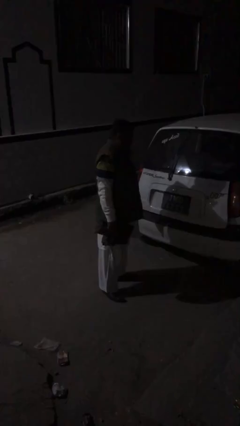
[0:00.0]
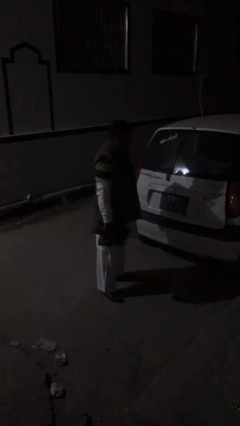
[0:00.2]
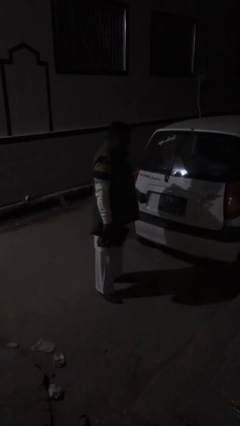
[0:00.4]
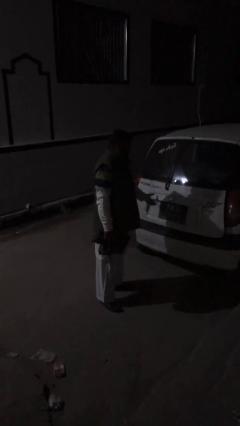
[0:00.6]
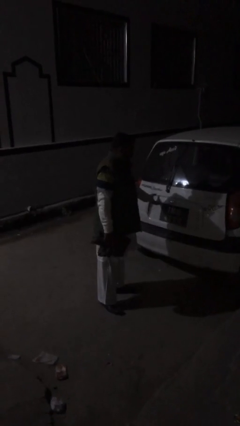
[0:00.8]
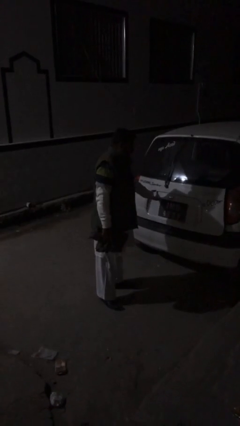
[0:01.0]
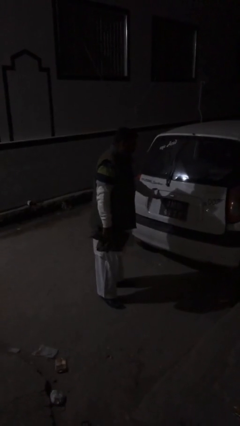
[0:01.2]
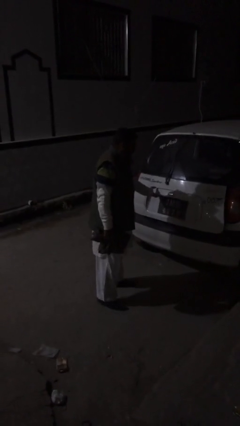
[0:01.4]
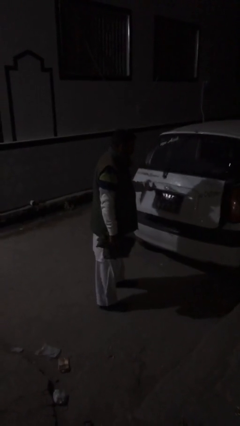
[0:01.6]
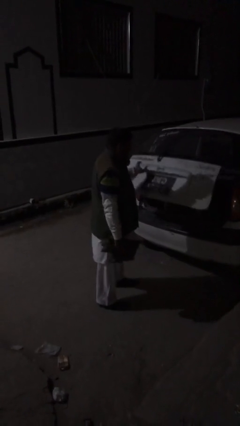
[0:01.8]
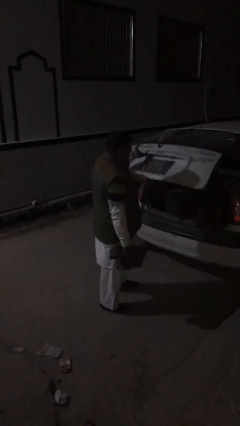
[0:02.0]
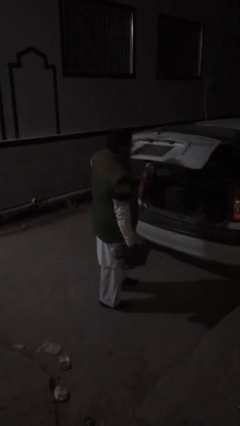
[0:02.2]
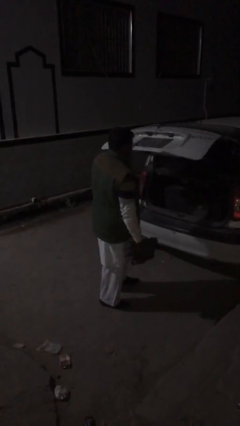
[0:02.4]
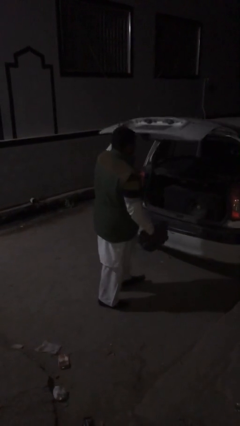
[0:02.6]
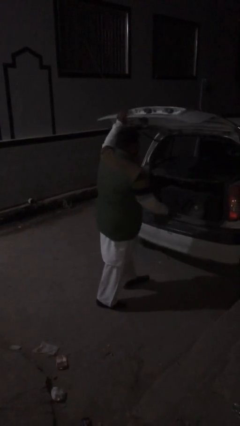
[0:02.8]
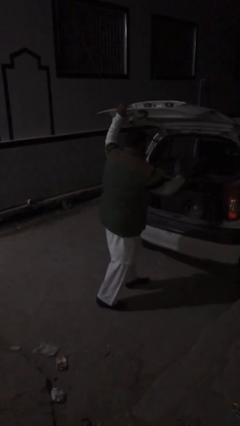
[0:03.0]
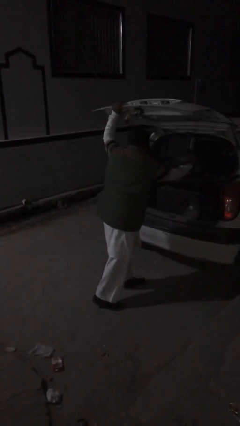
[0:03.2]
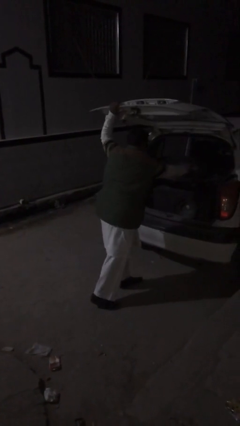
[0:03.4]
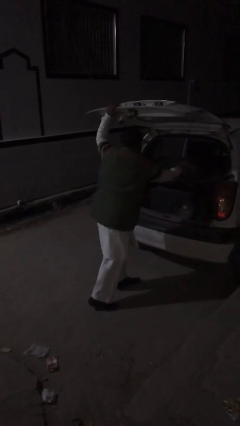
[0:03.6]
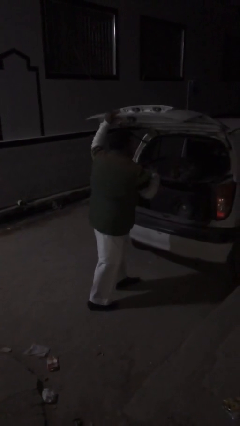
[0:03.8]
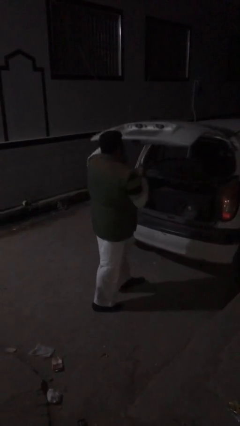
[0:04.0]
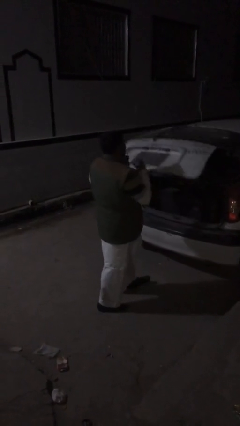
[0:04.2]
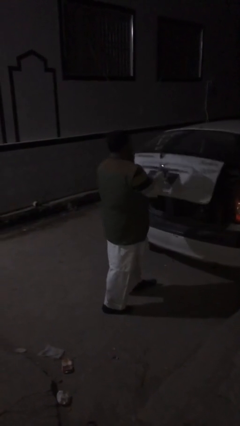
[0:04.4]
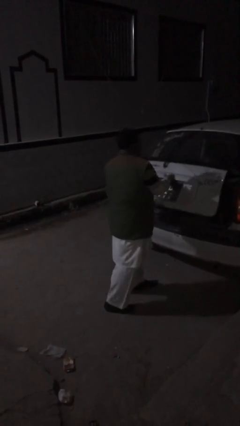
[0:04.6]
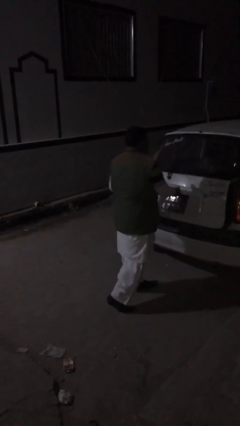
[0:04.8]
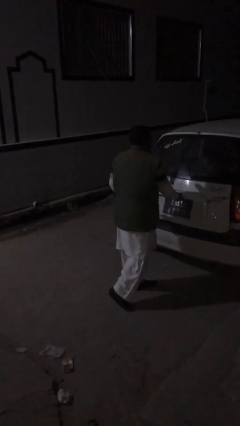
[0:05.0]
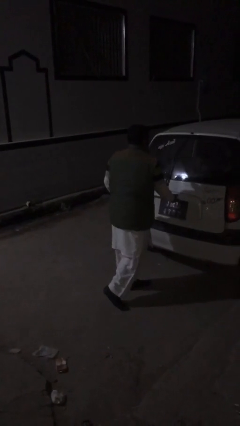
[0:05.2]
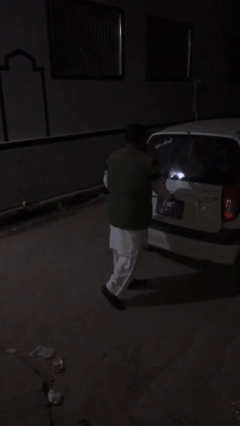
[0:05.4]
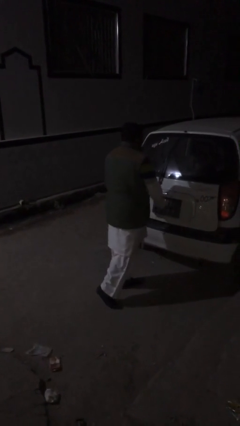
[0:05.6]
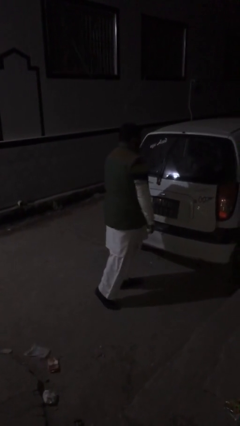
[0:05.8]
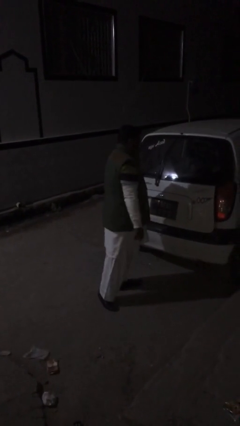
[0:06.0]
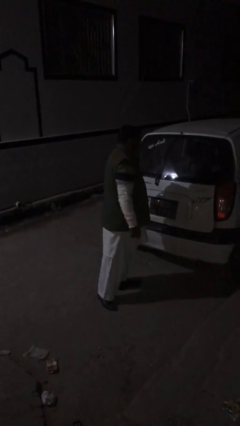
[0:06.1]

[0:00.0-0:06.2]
person loads car

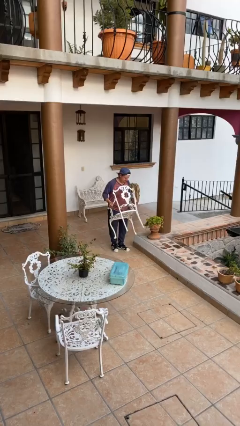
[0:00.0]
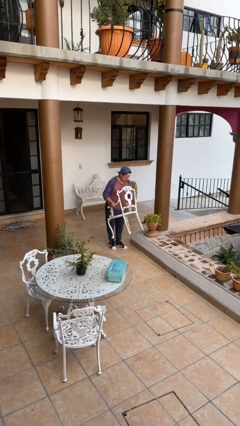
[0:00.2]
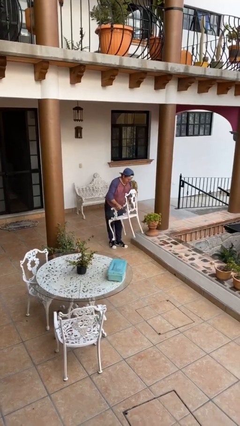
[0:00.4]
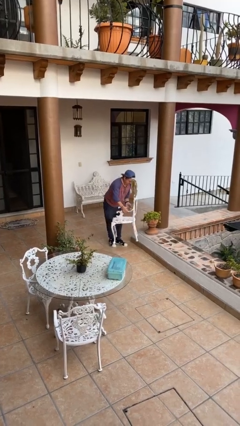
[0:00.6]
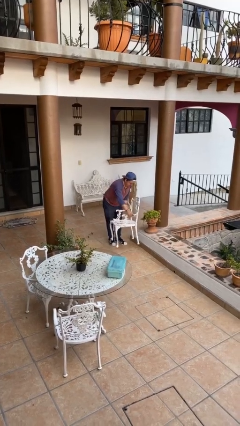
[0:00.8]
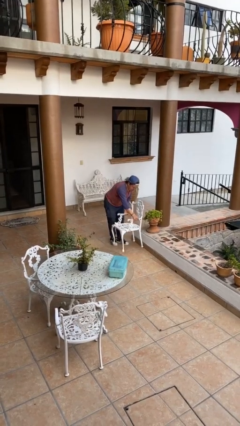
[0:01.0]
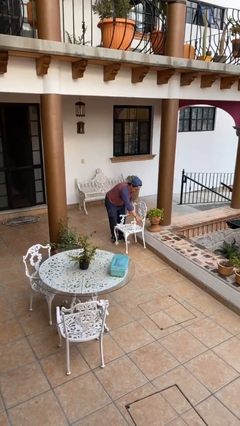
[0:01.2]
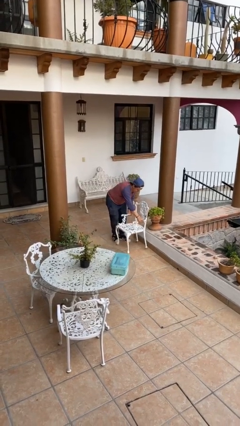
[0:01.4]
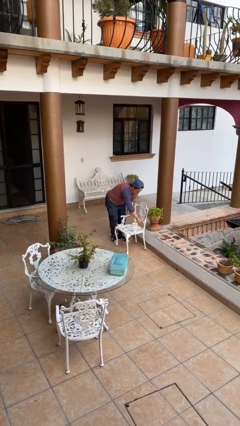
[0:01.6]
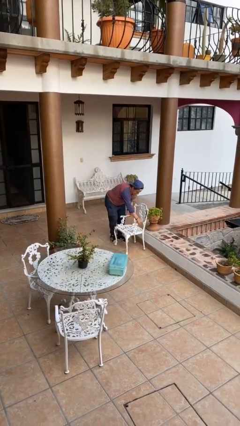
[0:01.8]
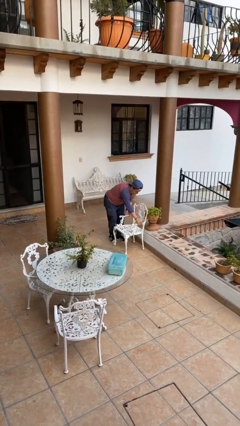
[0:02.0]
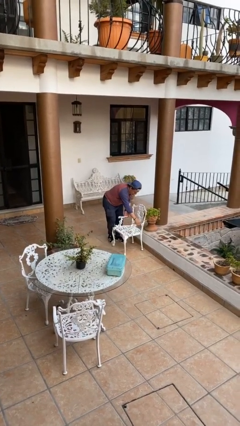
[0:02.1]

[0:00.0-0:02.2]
person puts down object on floor

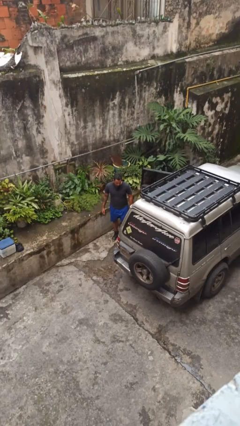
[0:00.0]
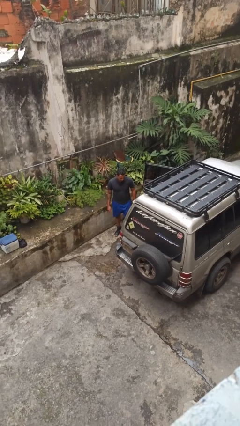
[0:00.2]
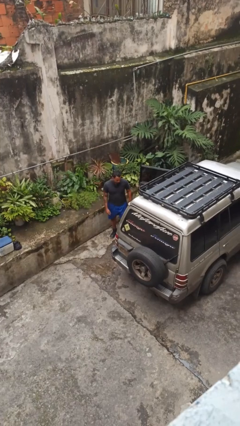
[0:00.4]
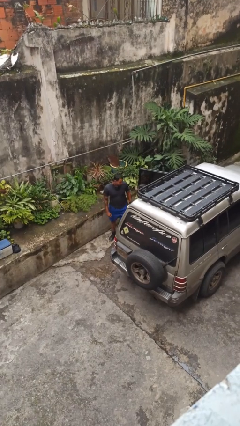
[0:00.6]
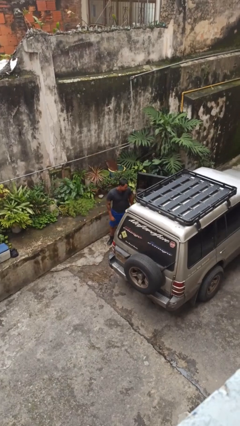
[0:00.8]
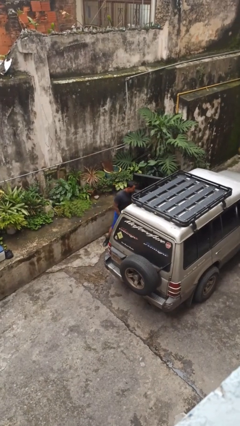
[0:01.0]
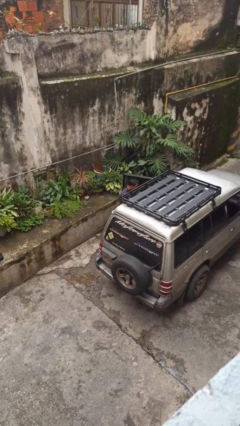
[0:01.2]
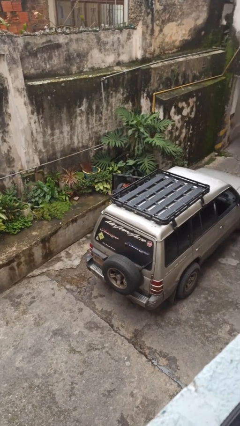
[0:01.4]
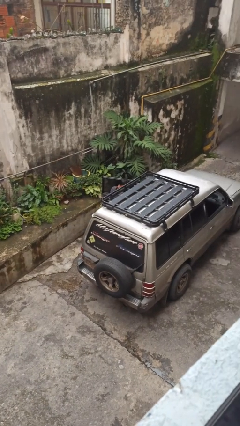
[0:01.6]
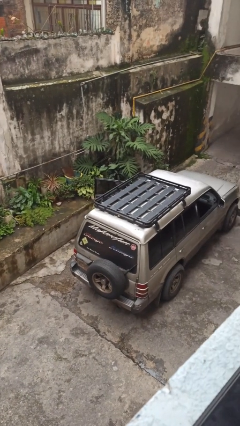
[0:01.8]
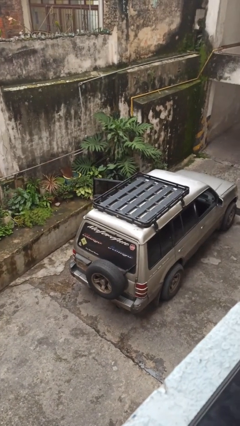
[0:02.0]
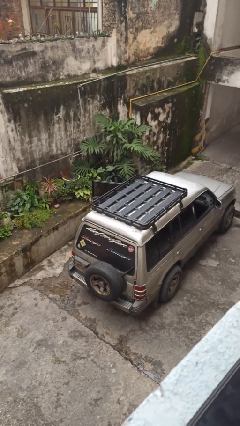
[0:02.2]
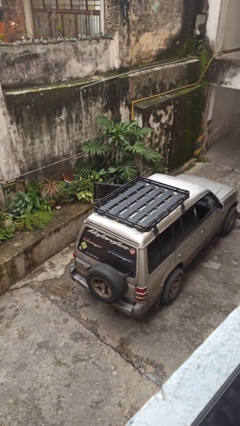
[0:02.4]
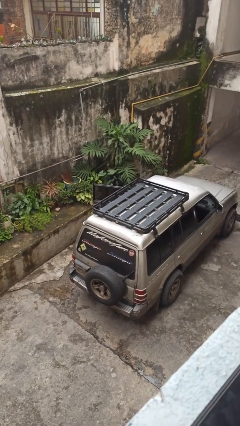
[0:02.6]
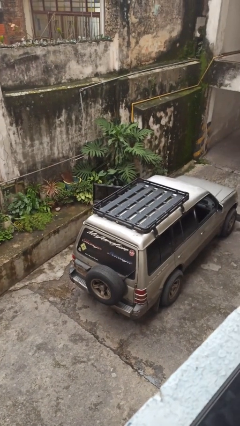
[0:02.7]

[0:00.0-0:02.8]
person enters car

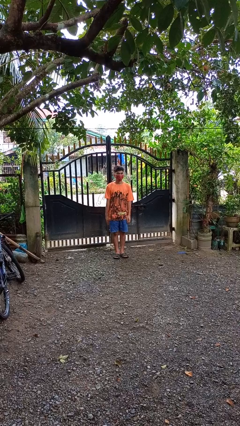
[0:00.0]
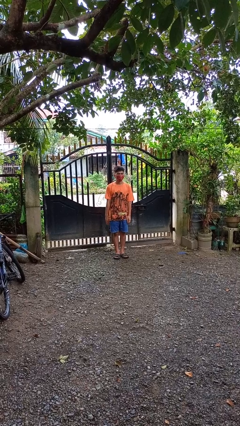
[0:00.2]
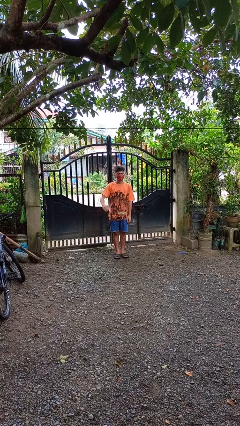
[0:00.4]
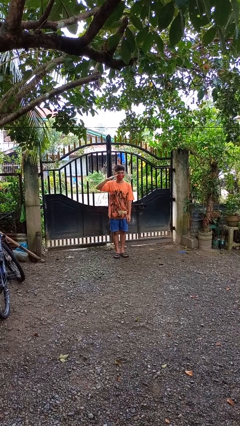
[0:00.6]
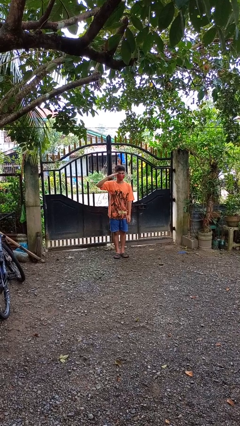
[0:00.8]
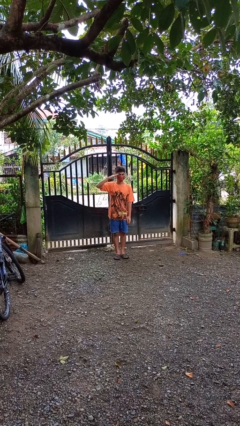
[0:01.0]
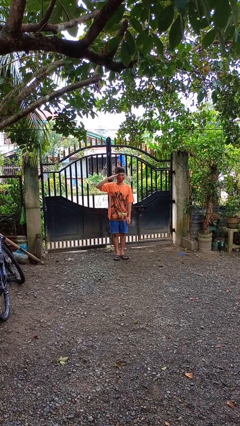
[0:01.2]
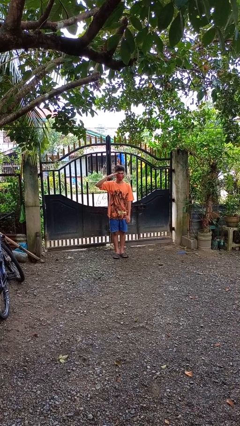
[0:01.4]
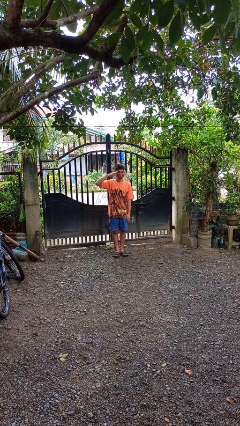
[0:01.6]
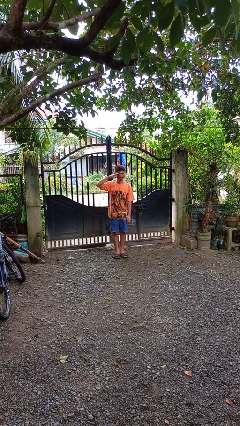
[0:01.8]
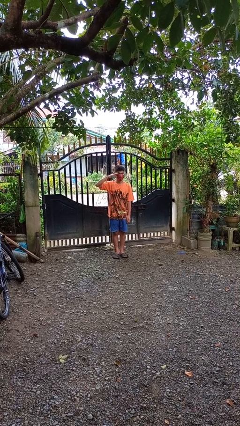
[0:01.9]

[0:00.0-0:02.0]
person salutes

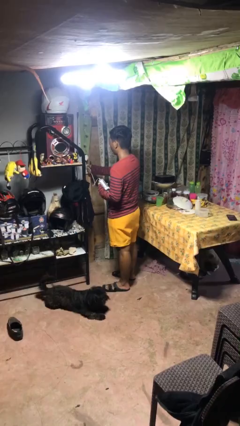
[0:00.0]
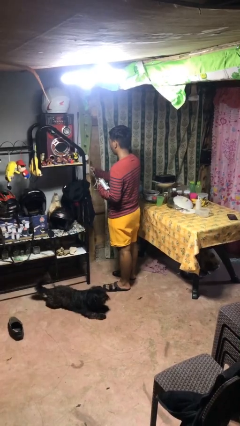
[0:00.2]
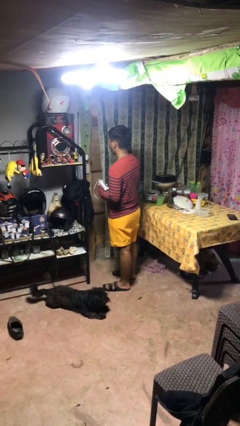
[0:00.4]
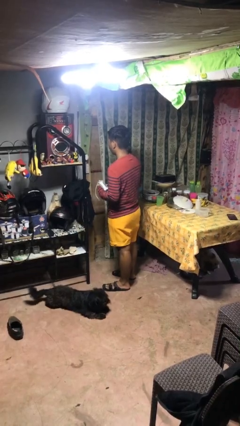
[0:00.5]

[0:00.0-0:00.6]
person unplugs from electrical socket

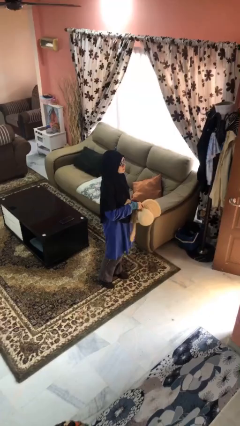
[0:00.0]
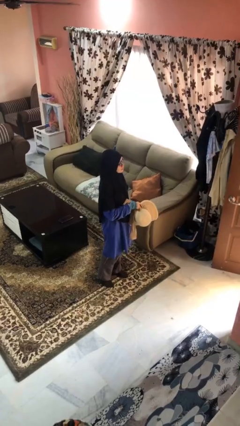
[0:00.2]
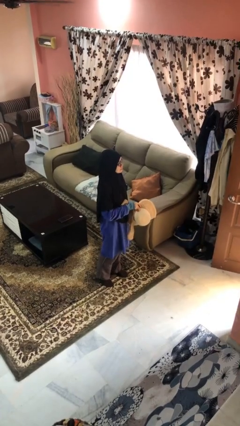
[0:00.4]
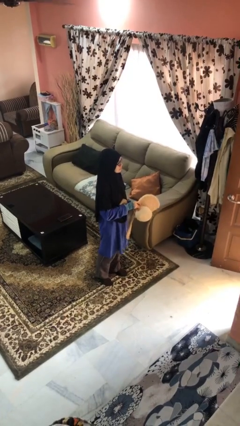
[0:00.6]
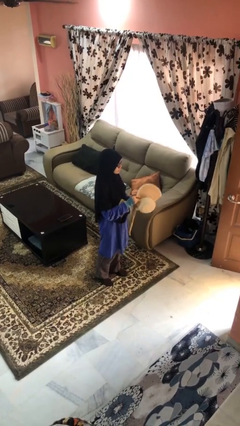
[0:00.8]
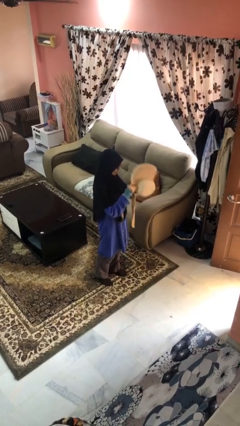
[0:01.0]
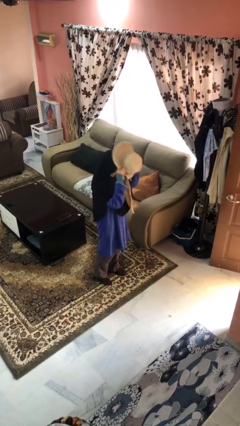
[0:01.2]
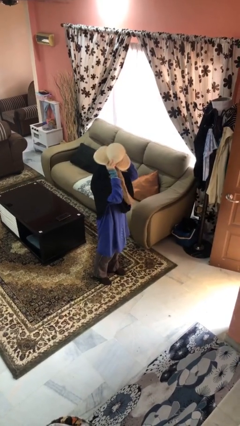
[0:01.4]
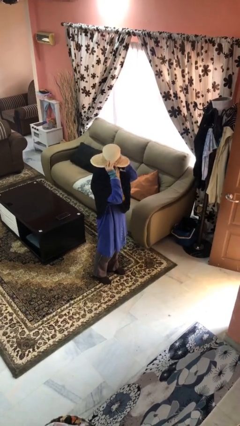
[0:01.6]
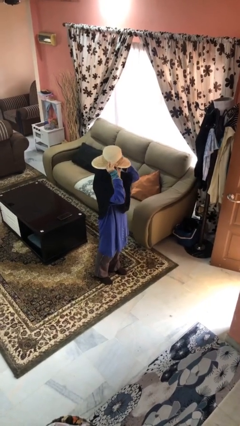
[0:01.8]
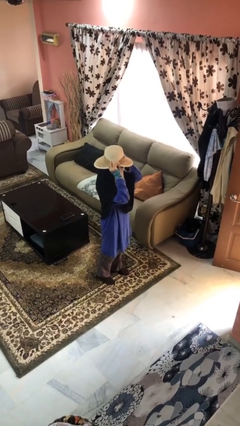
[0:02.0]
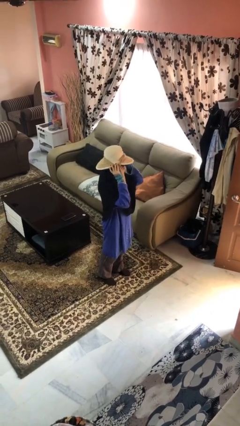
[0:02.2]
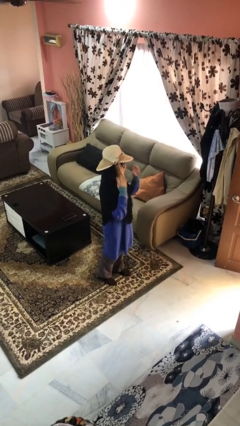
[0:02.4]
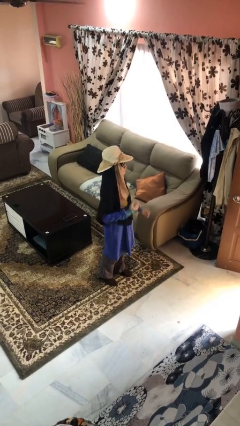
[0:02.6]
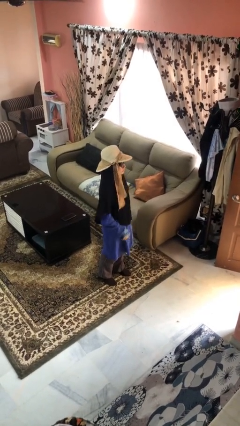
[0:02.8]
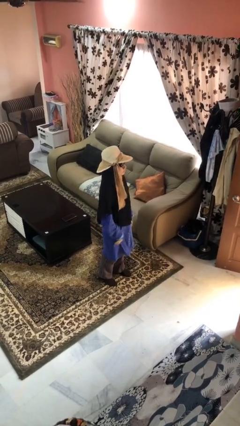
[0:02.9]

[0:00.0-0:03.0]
person puts on hat
